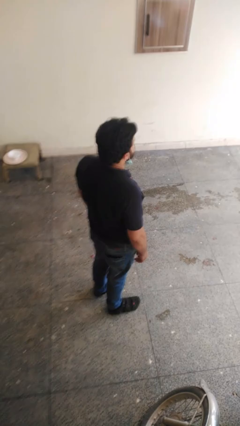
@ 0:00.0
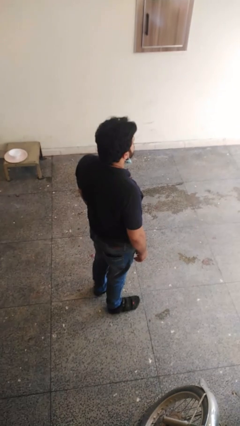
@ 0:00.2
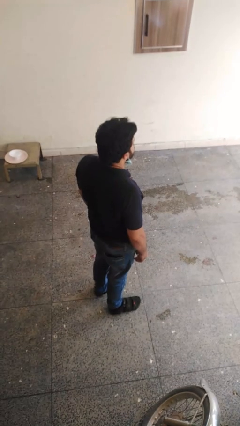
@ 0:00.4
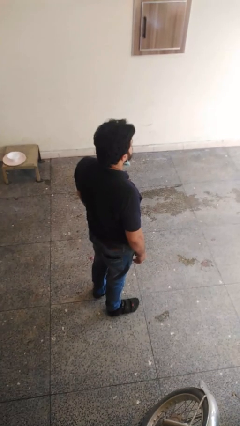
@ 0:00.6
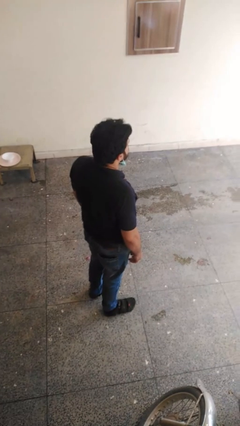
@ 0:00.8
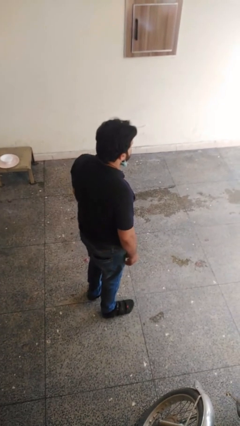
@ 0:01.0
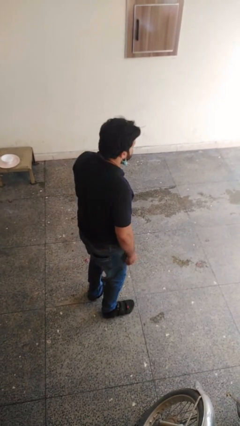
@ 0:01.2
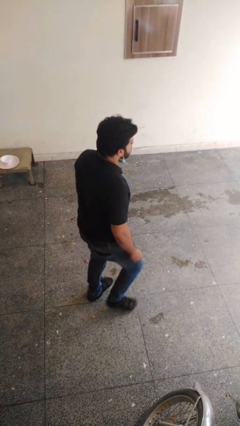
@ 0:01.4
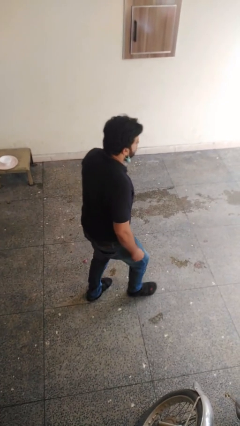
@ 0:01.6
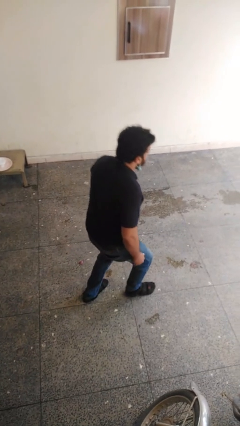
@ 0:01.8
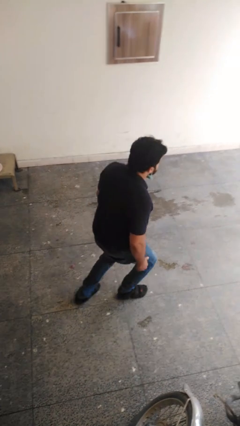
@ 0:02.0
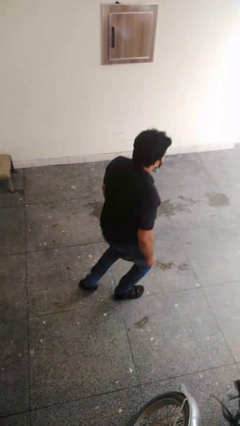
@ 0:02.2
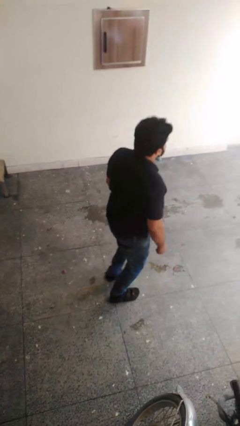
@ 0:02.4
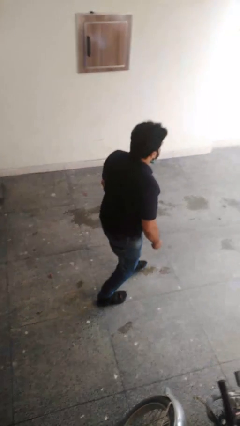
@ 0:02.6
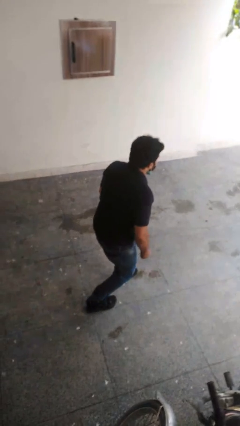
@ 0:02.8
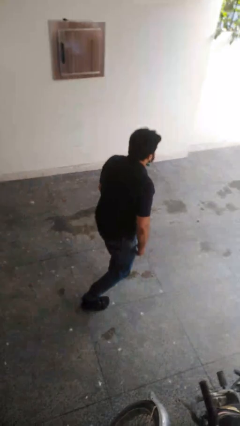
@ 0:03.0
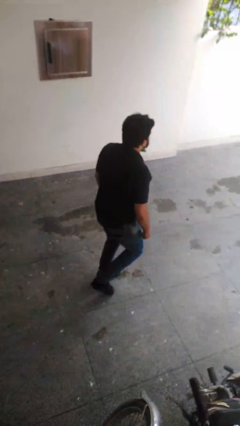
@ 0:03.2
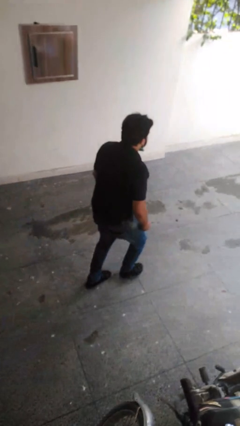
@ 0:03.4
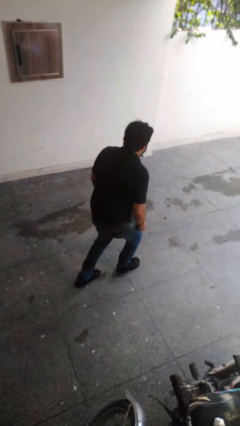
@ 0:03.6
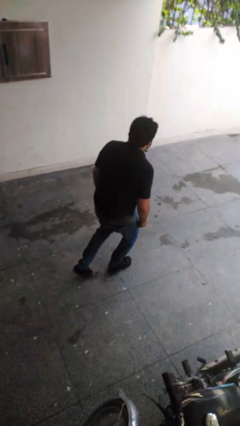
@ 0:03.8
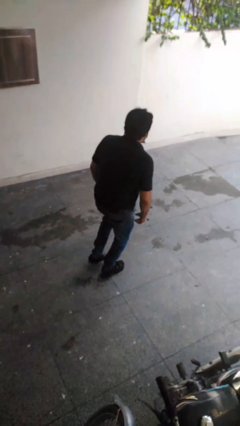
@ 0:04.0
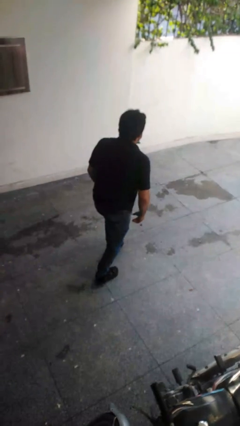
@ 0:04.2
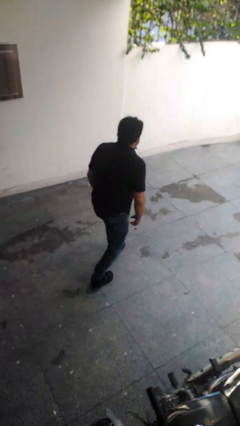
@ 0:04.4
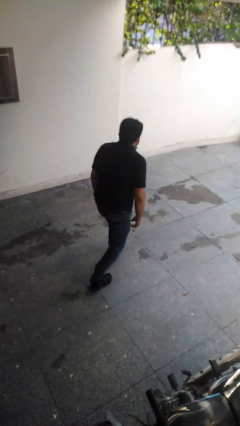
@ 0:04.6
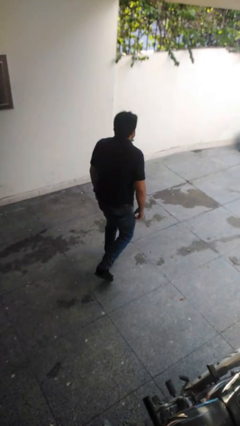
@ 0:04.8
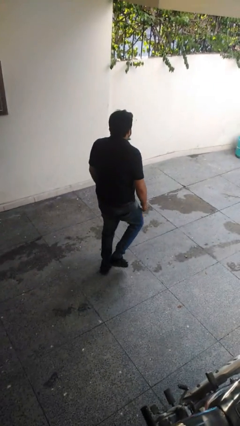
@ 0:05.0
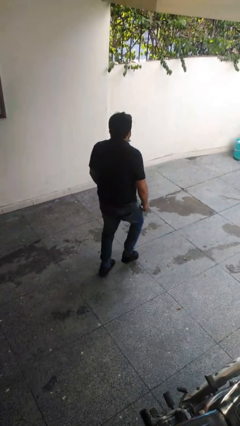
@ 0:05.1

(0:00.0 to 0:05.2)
person walks tiptoe

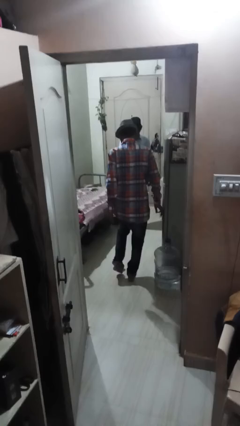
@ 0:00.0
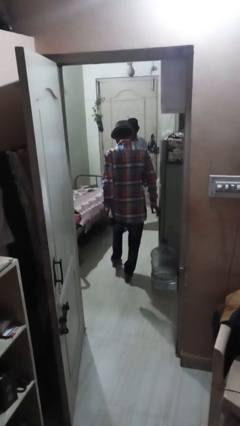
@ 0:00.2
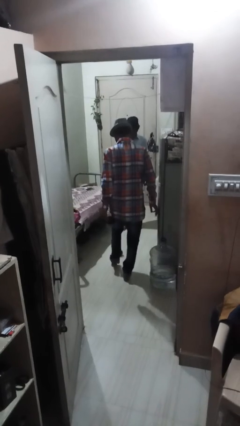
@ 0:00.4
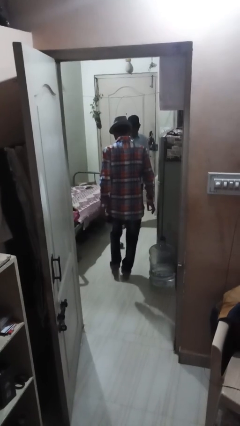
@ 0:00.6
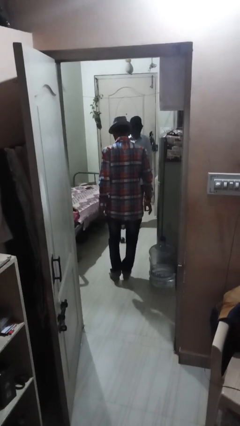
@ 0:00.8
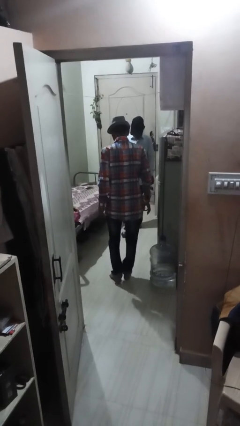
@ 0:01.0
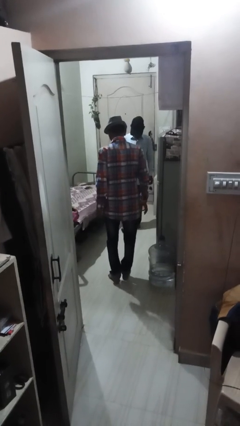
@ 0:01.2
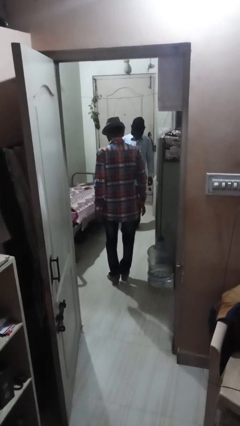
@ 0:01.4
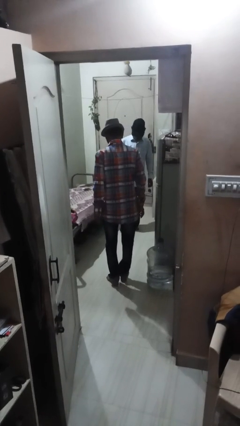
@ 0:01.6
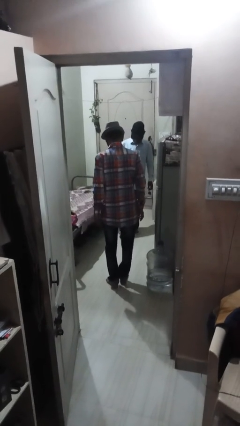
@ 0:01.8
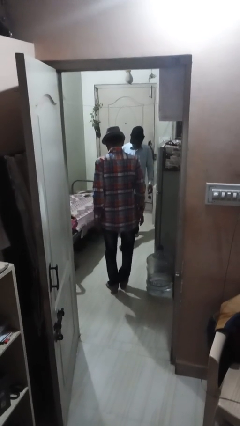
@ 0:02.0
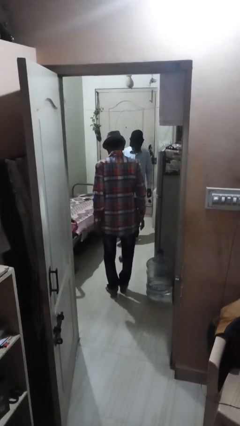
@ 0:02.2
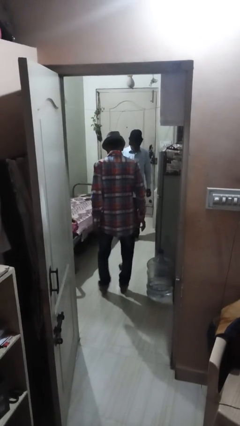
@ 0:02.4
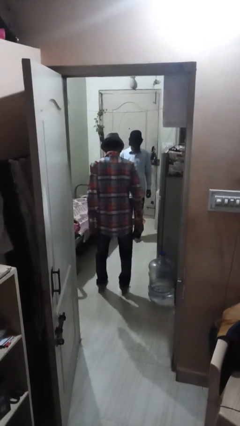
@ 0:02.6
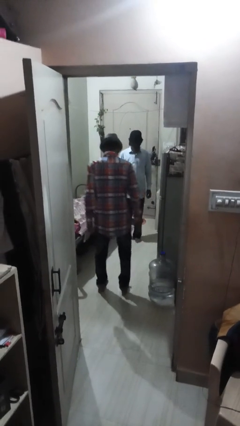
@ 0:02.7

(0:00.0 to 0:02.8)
person kicks object to person

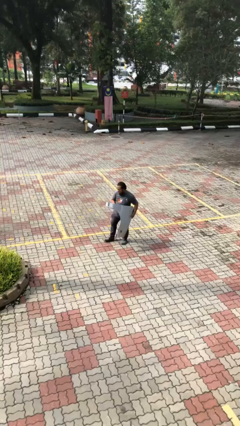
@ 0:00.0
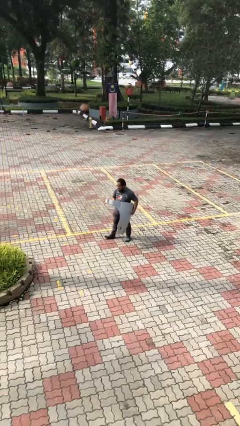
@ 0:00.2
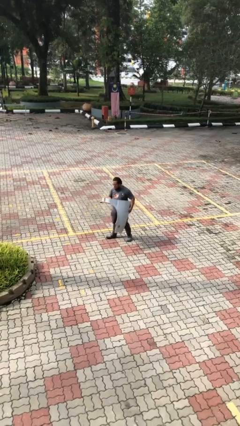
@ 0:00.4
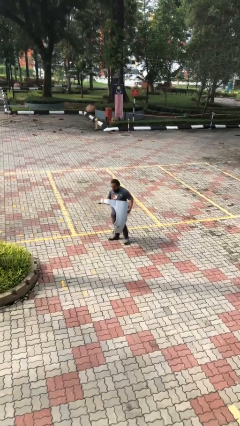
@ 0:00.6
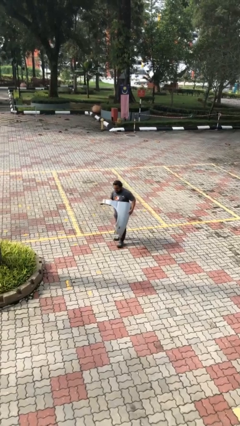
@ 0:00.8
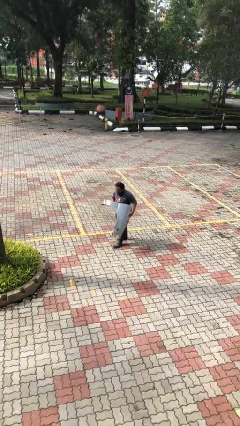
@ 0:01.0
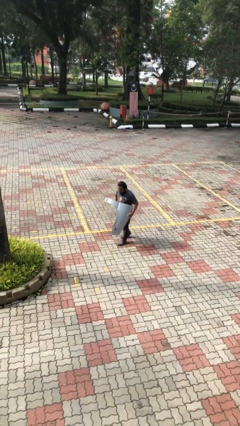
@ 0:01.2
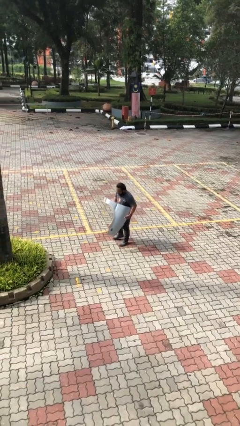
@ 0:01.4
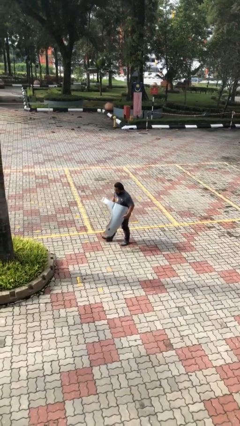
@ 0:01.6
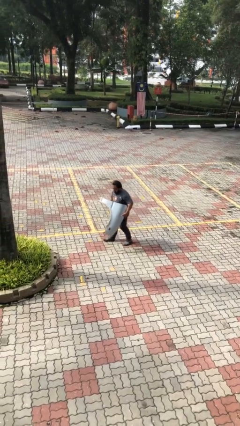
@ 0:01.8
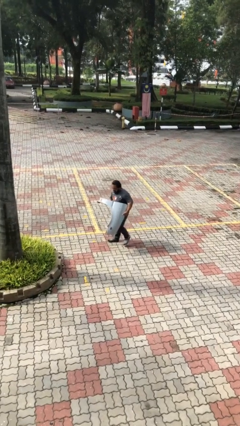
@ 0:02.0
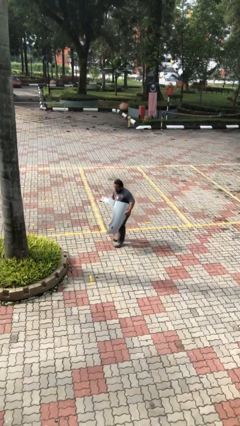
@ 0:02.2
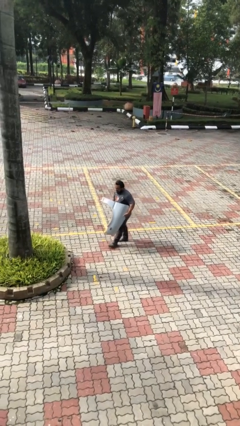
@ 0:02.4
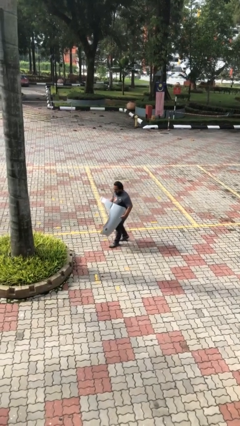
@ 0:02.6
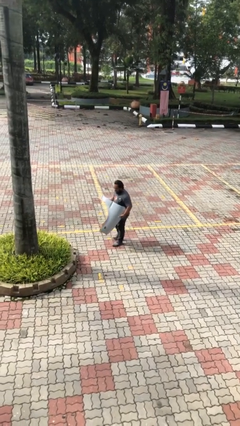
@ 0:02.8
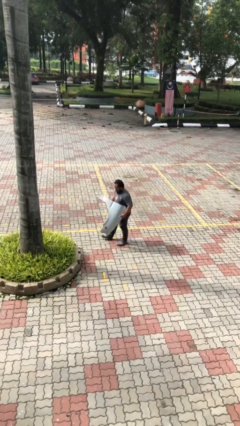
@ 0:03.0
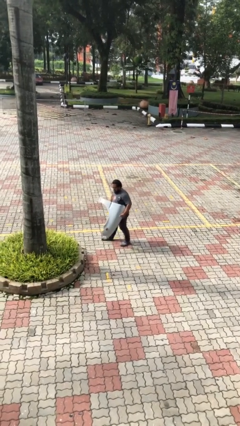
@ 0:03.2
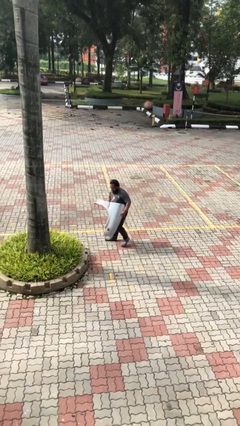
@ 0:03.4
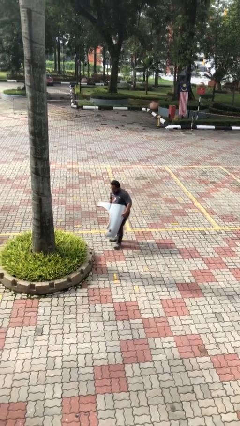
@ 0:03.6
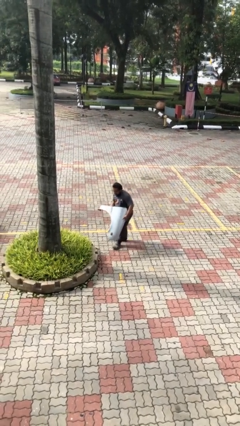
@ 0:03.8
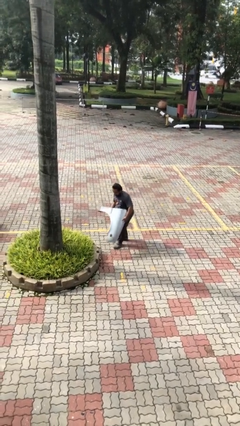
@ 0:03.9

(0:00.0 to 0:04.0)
person carries heavy object

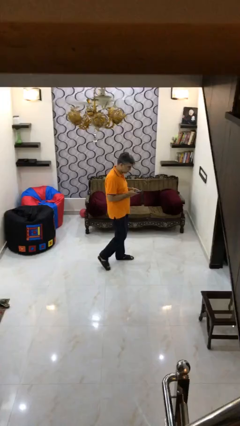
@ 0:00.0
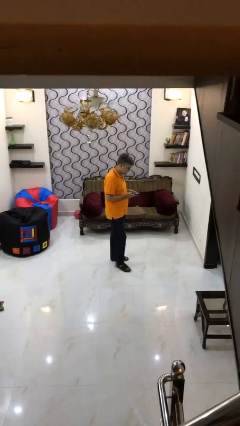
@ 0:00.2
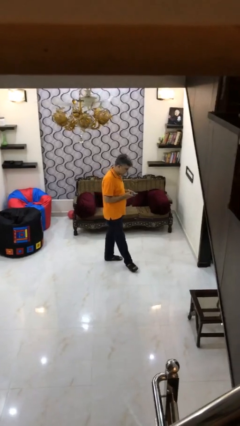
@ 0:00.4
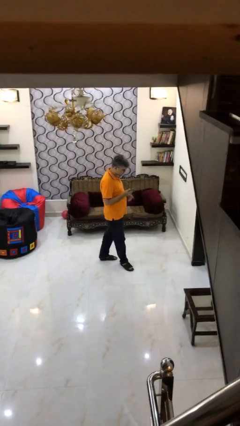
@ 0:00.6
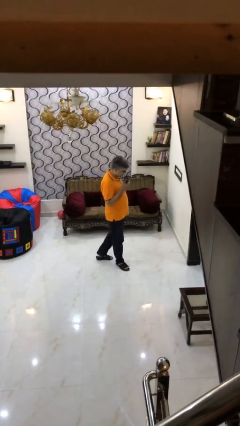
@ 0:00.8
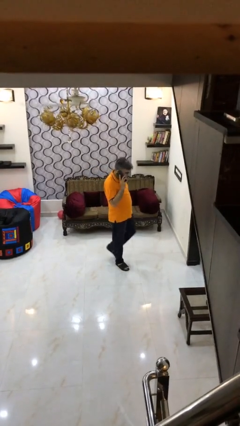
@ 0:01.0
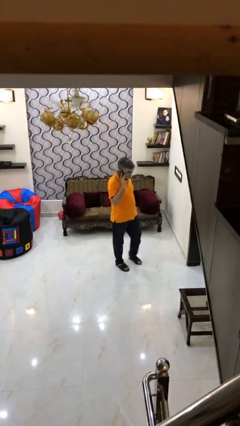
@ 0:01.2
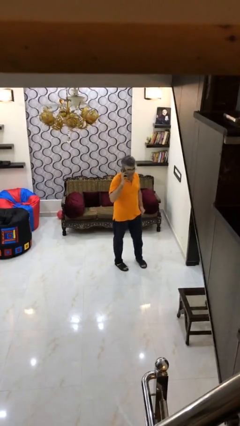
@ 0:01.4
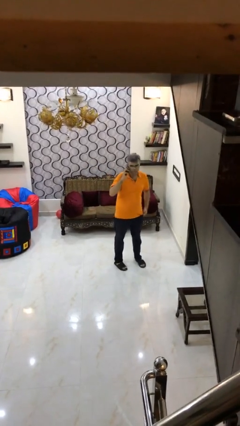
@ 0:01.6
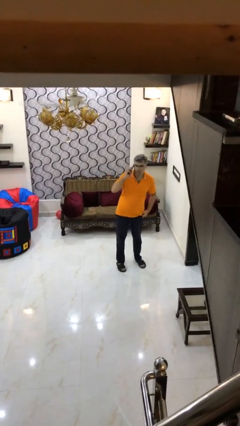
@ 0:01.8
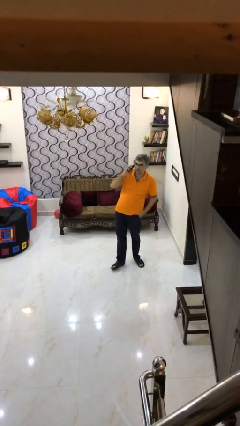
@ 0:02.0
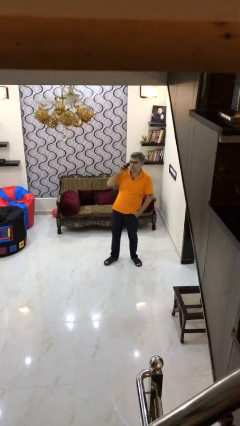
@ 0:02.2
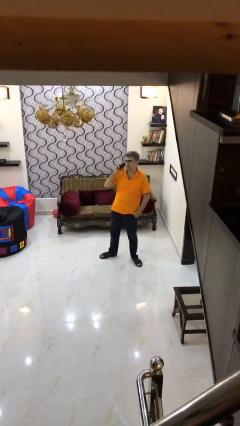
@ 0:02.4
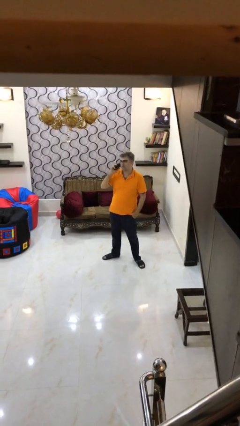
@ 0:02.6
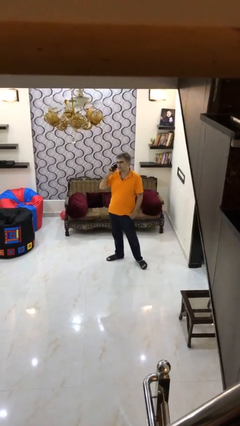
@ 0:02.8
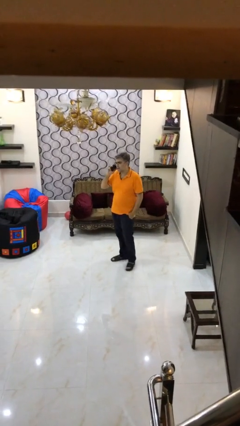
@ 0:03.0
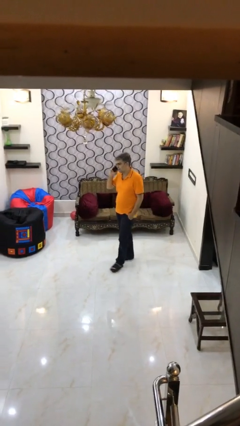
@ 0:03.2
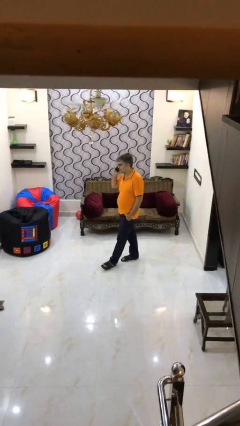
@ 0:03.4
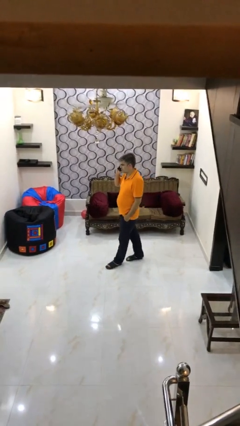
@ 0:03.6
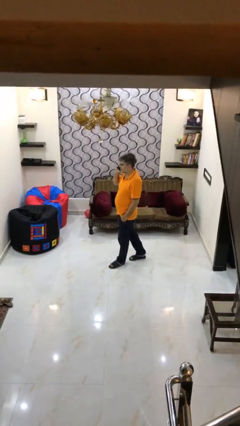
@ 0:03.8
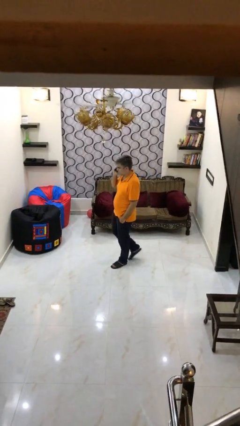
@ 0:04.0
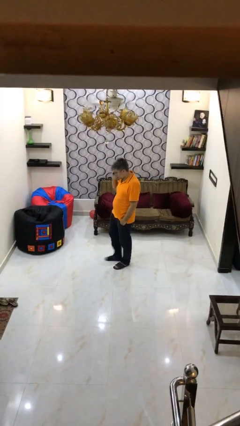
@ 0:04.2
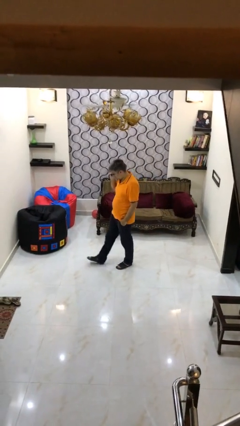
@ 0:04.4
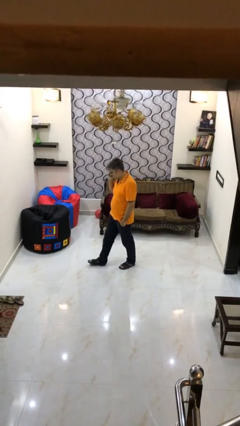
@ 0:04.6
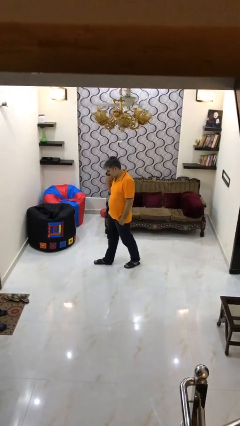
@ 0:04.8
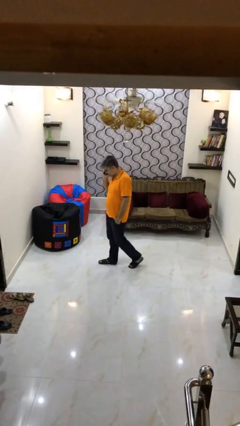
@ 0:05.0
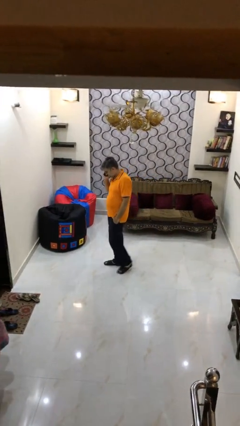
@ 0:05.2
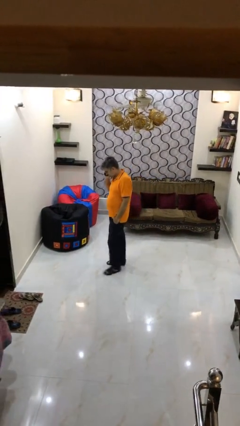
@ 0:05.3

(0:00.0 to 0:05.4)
person talks on phone
